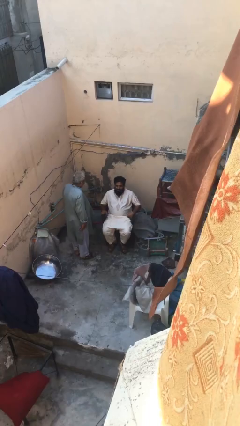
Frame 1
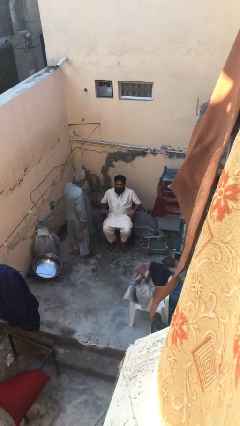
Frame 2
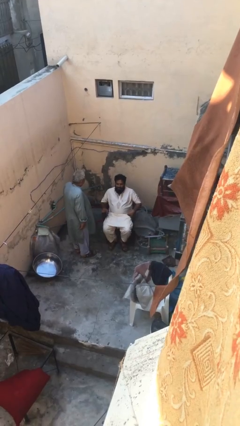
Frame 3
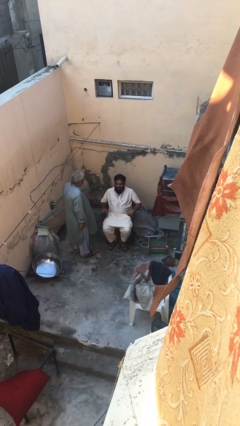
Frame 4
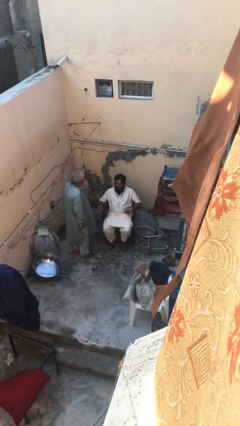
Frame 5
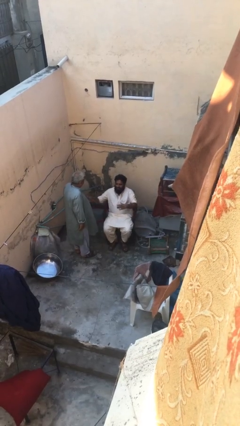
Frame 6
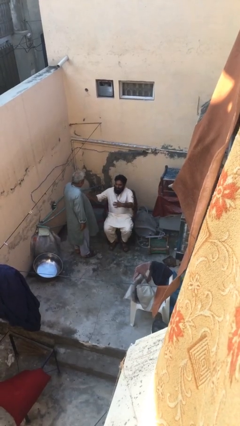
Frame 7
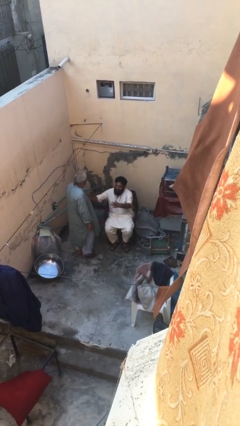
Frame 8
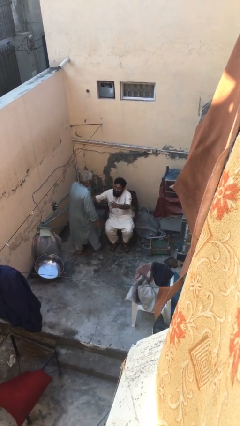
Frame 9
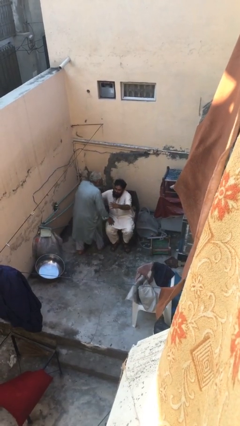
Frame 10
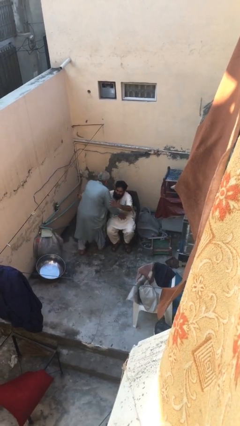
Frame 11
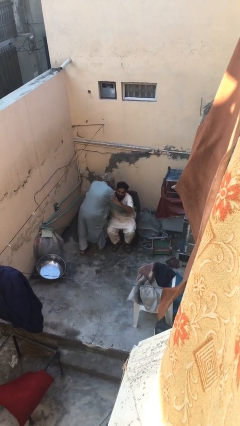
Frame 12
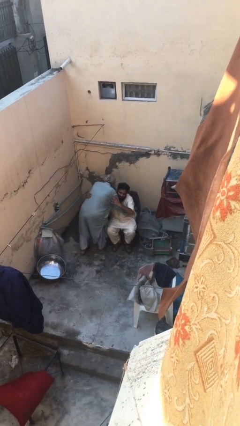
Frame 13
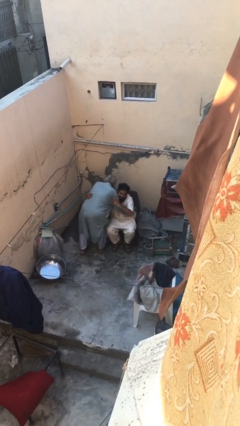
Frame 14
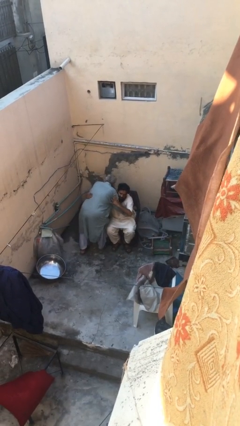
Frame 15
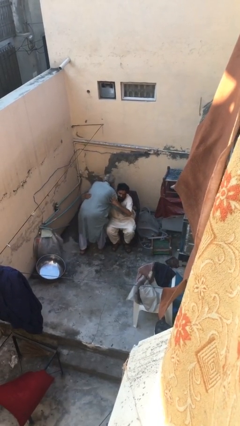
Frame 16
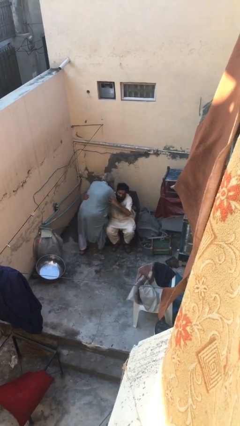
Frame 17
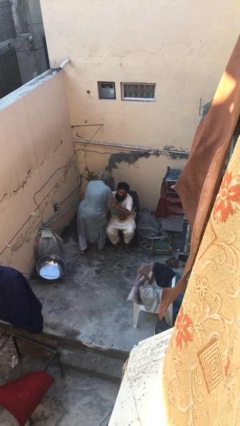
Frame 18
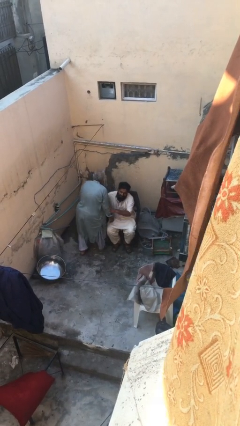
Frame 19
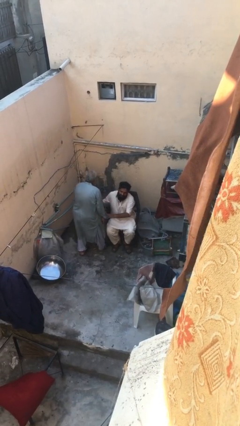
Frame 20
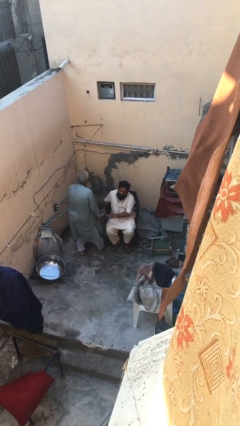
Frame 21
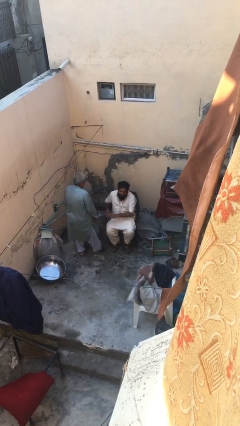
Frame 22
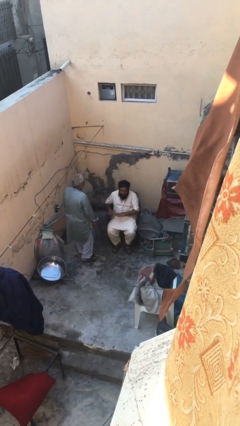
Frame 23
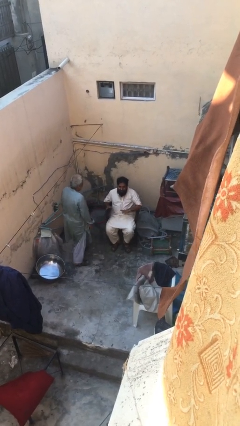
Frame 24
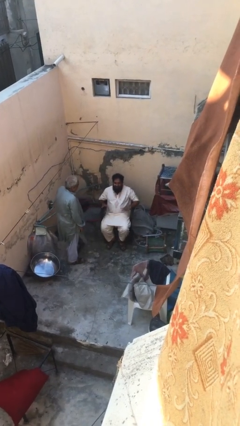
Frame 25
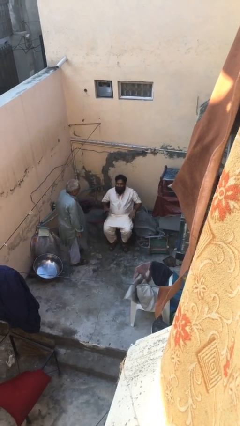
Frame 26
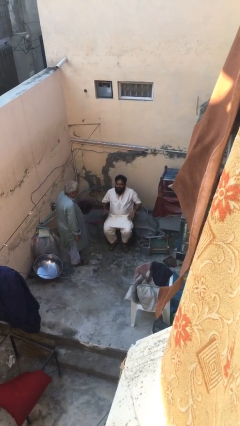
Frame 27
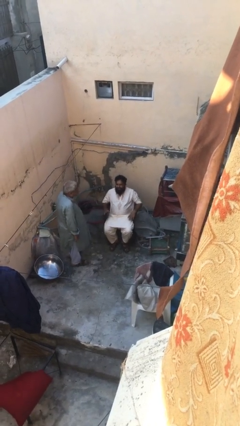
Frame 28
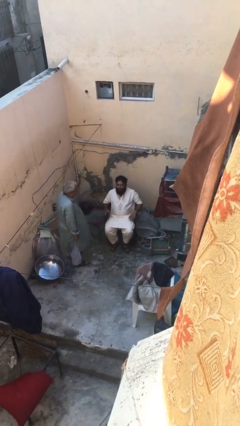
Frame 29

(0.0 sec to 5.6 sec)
person embraces person

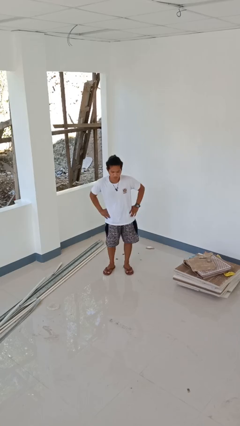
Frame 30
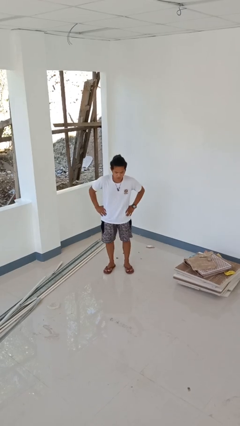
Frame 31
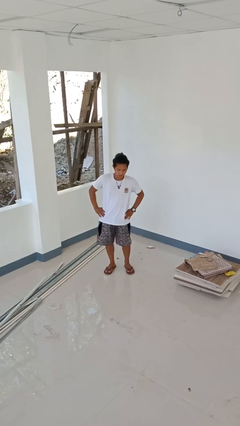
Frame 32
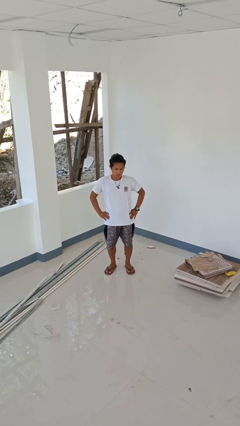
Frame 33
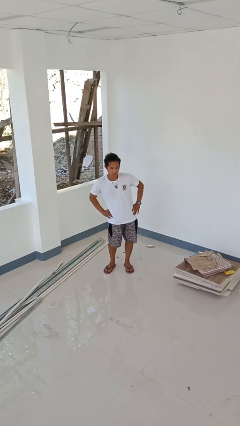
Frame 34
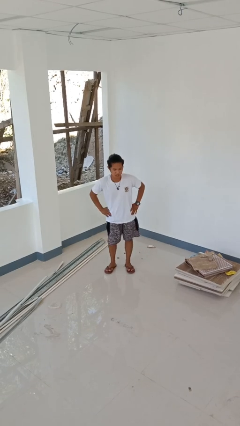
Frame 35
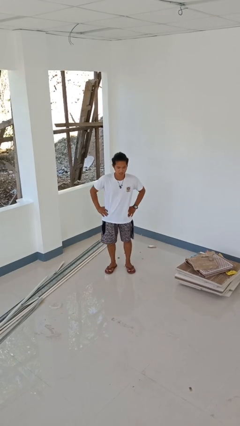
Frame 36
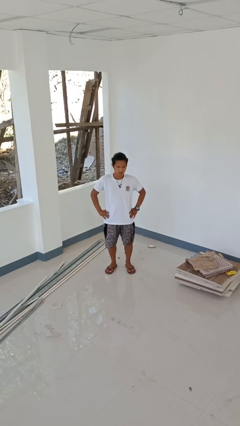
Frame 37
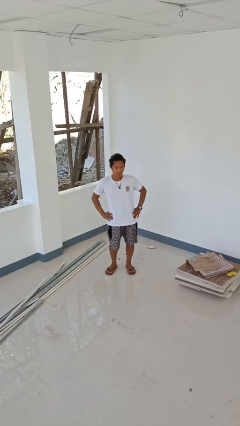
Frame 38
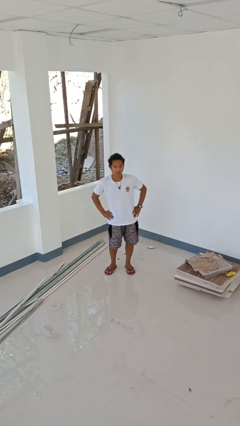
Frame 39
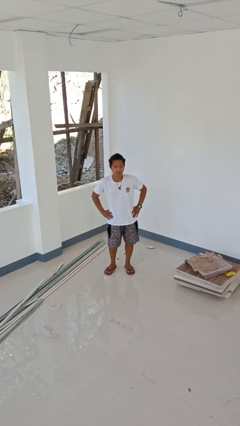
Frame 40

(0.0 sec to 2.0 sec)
person wiggles hips

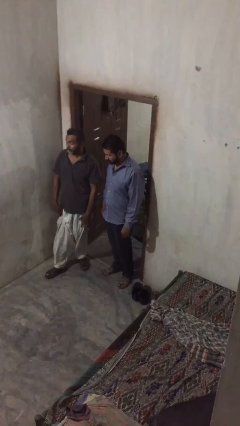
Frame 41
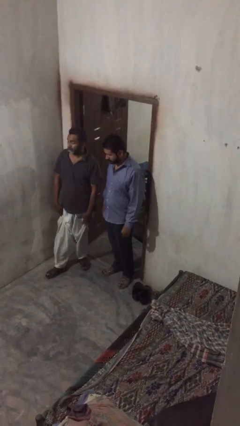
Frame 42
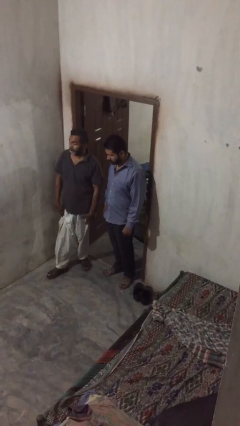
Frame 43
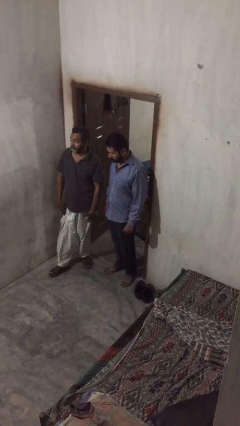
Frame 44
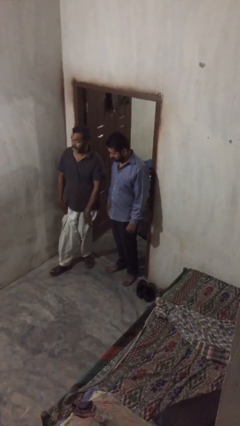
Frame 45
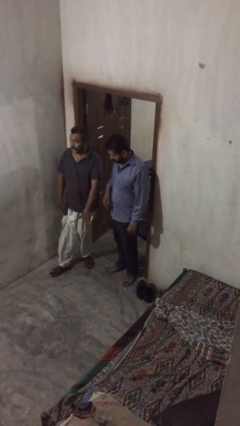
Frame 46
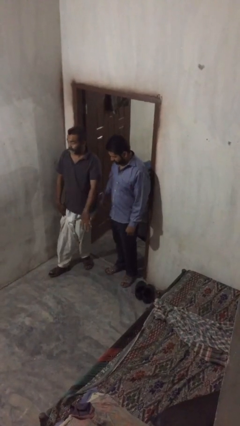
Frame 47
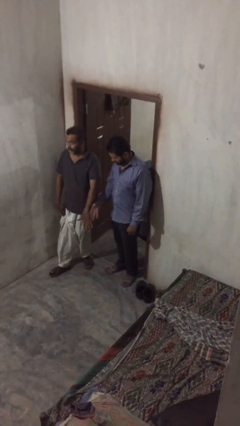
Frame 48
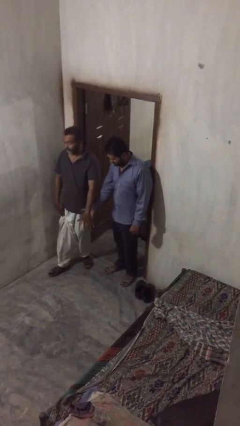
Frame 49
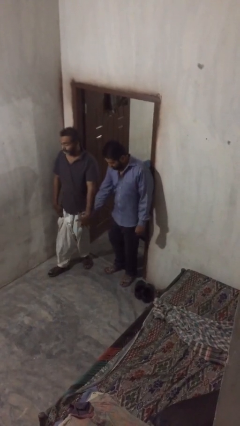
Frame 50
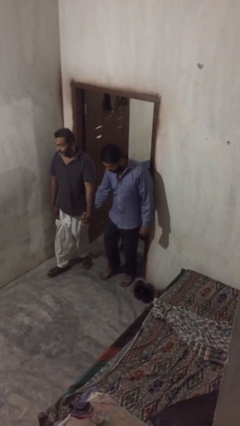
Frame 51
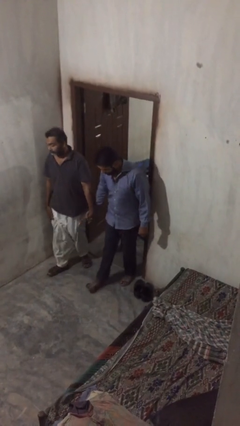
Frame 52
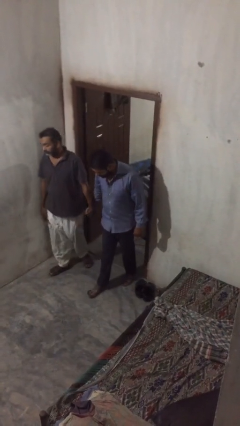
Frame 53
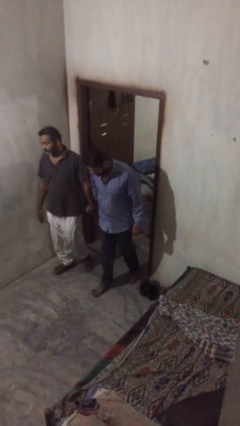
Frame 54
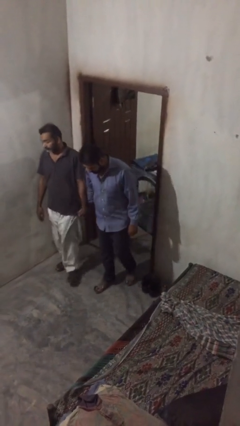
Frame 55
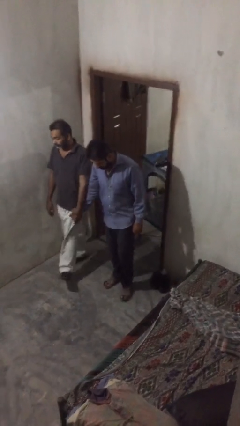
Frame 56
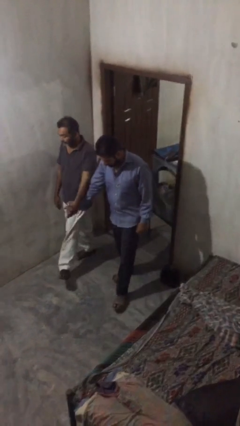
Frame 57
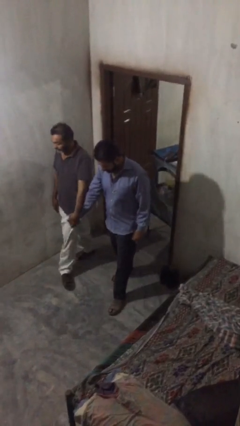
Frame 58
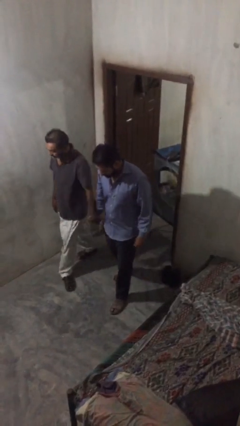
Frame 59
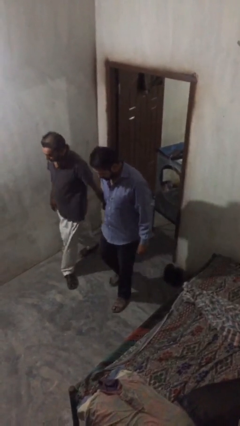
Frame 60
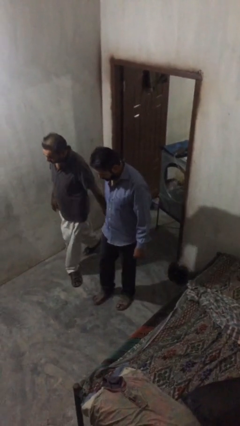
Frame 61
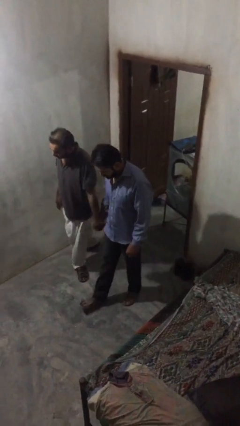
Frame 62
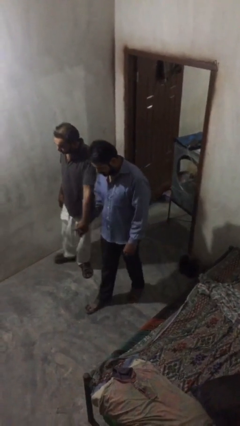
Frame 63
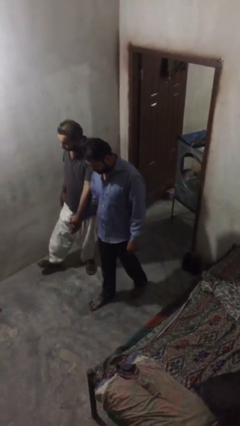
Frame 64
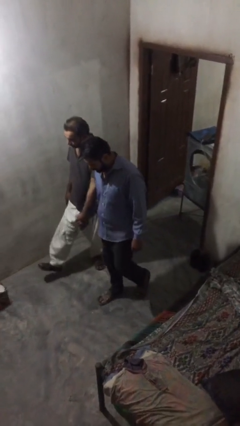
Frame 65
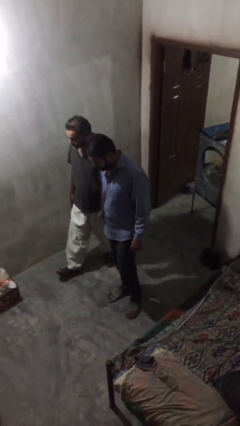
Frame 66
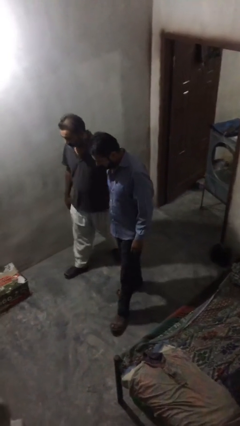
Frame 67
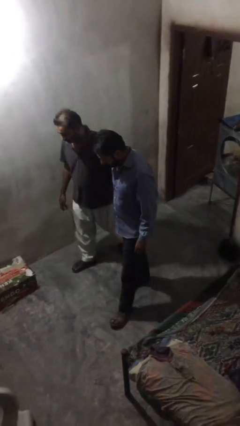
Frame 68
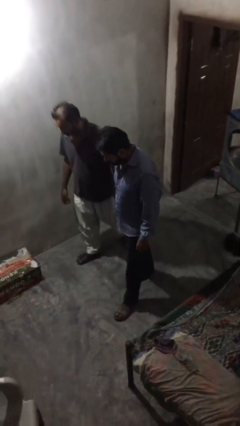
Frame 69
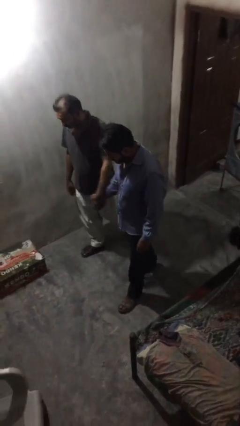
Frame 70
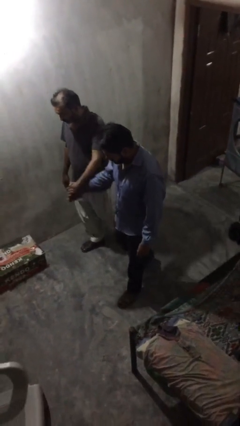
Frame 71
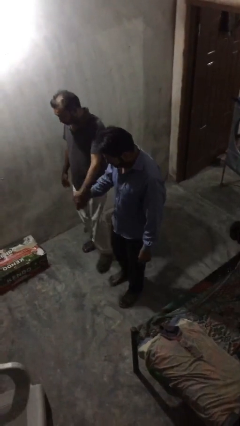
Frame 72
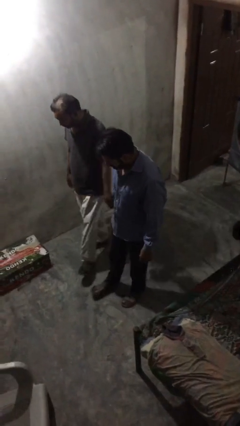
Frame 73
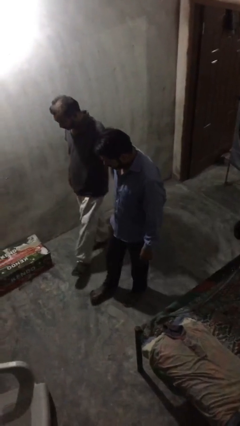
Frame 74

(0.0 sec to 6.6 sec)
person holds hand

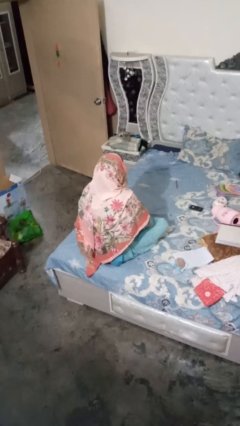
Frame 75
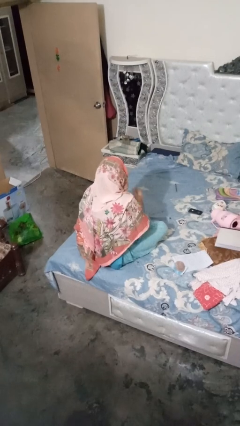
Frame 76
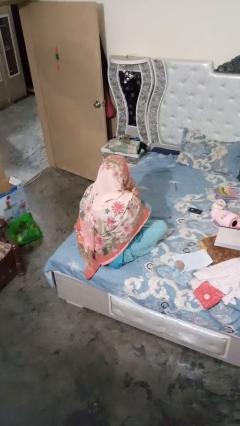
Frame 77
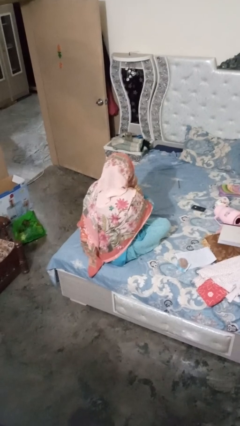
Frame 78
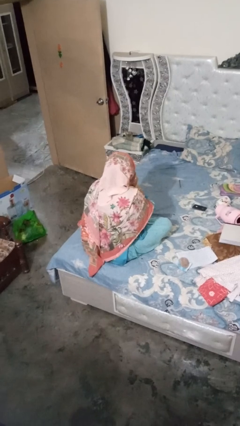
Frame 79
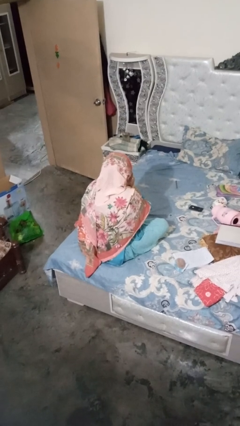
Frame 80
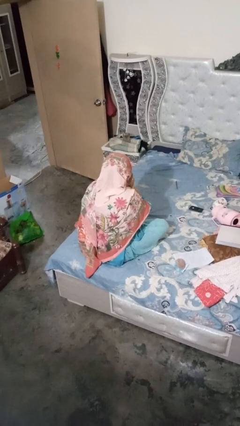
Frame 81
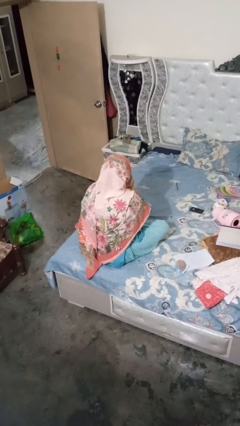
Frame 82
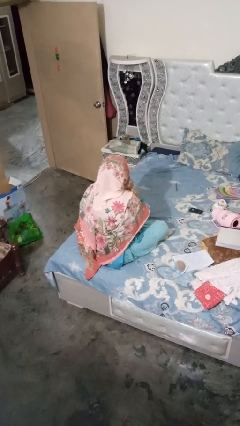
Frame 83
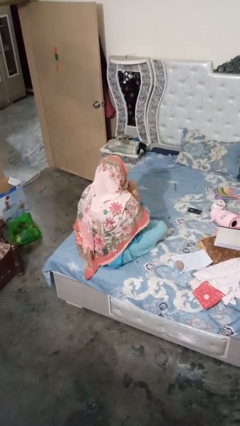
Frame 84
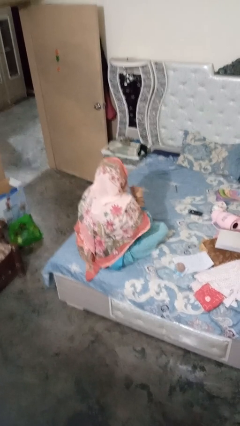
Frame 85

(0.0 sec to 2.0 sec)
person gestures listen closely

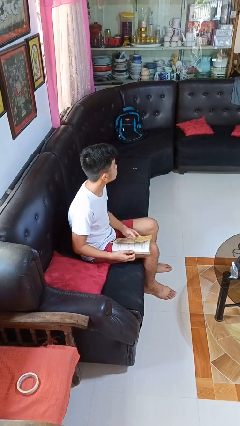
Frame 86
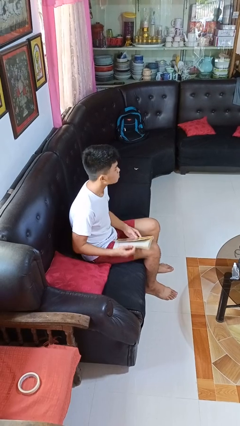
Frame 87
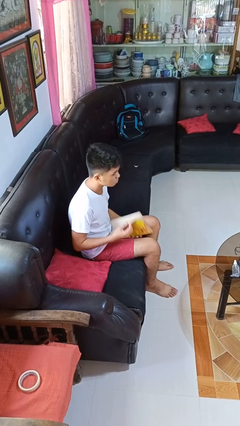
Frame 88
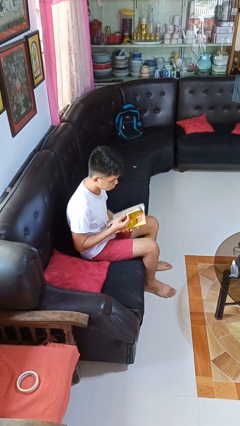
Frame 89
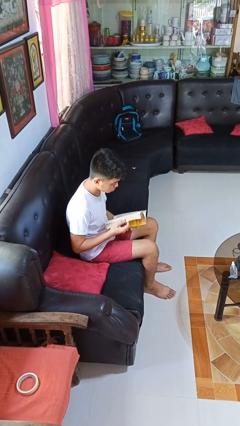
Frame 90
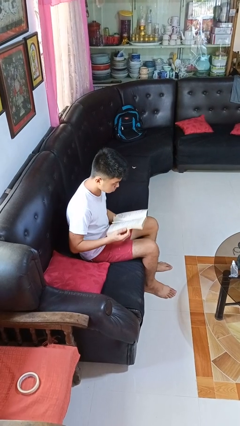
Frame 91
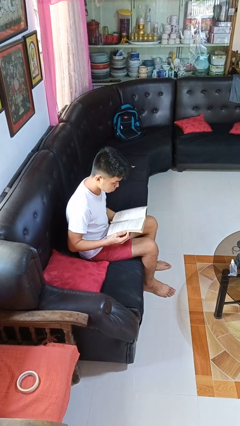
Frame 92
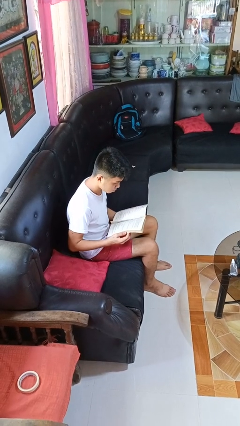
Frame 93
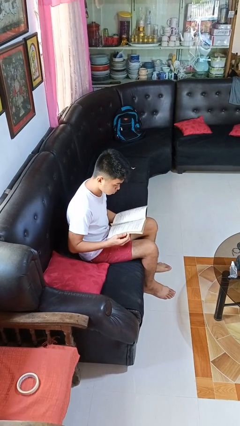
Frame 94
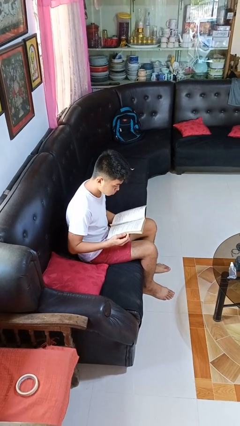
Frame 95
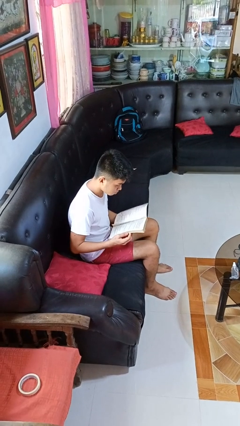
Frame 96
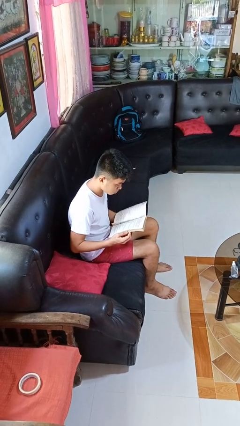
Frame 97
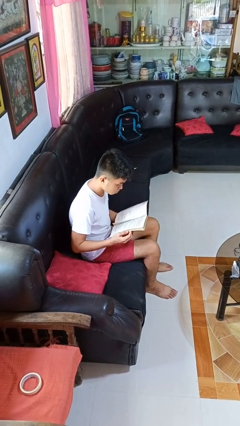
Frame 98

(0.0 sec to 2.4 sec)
person reads book
